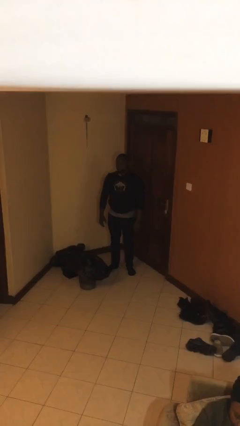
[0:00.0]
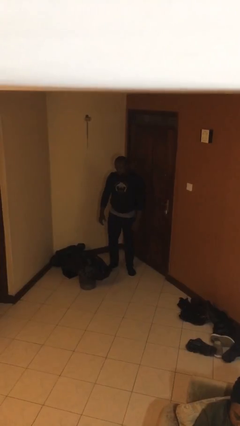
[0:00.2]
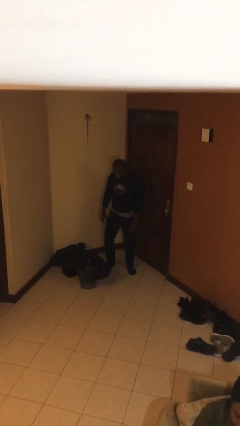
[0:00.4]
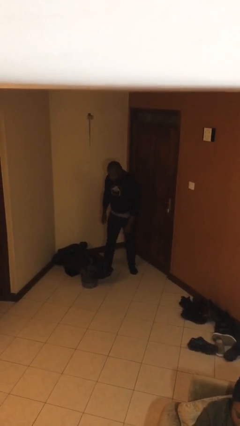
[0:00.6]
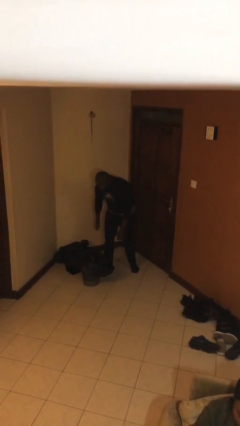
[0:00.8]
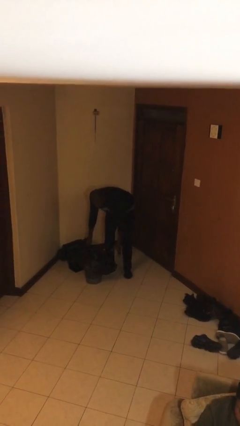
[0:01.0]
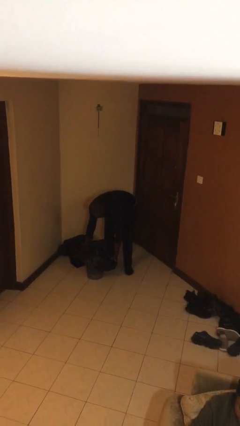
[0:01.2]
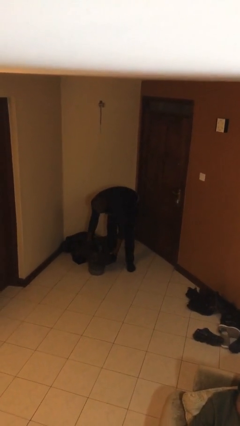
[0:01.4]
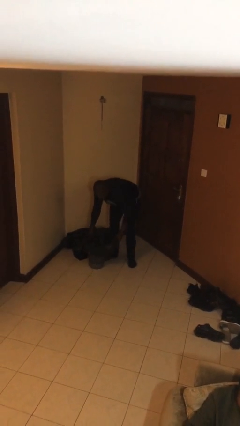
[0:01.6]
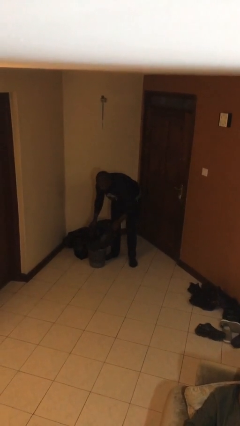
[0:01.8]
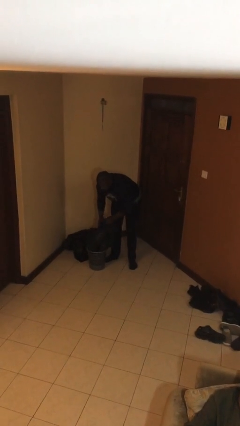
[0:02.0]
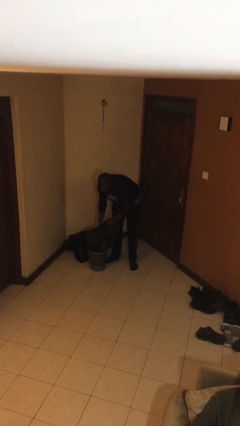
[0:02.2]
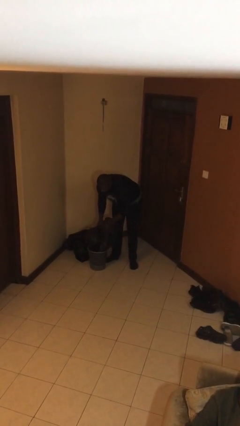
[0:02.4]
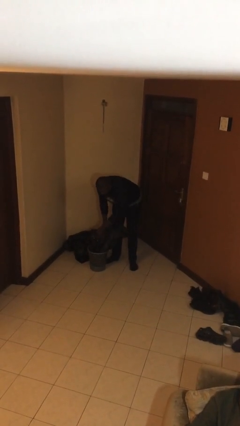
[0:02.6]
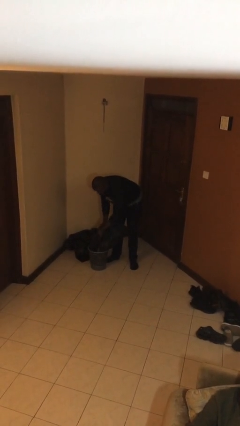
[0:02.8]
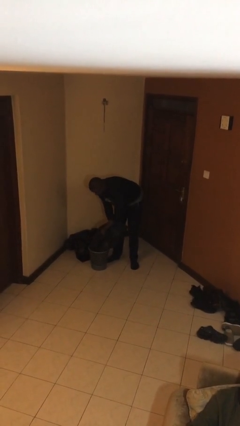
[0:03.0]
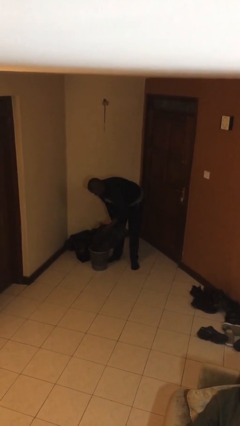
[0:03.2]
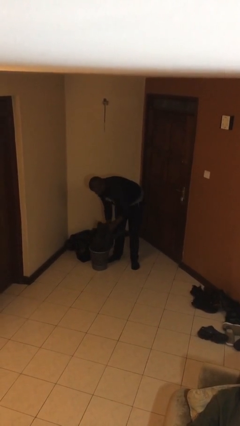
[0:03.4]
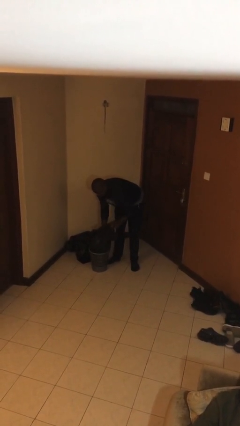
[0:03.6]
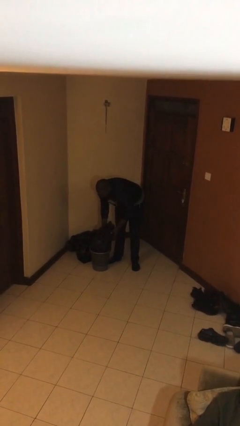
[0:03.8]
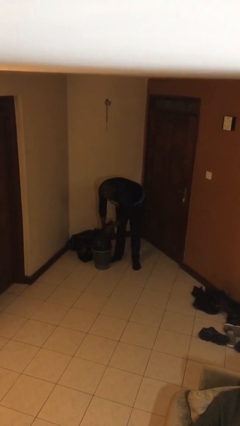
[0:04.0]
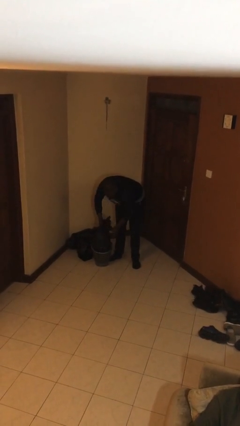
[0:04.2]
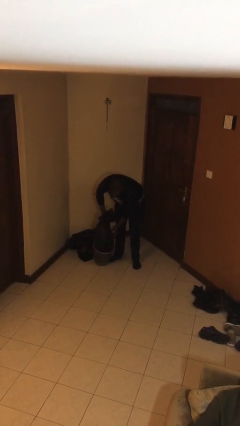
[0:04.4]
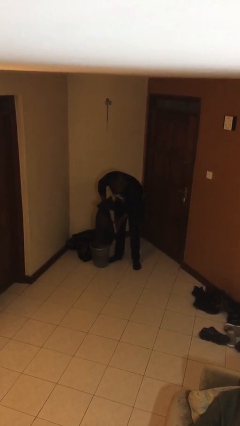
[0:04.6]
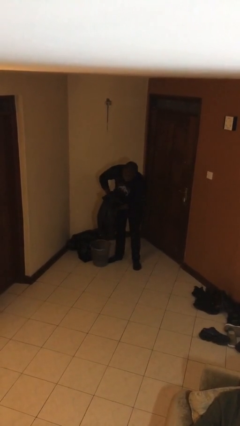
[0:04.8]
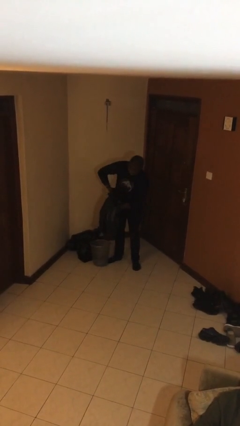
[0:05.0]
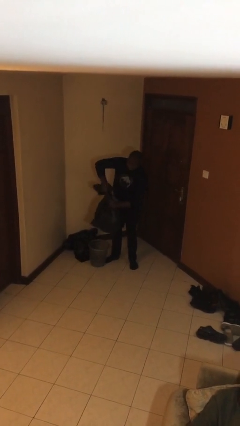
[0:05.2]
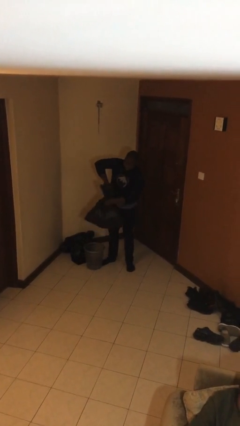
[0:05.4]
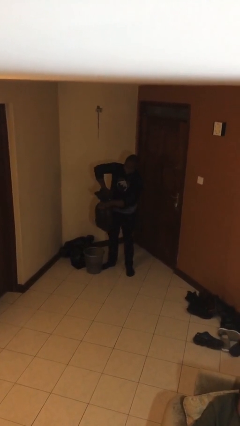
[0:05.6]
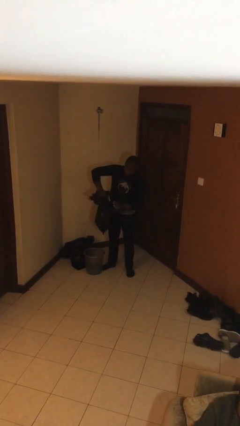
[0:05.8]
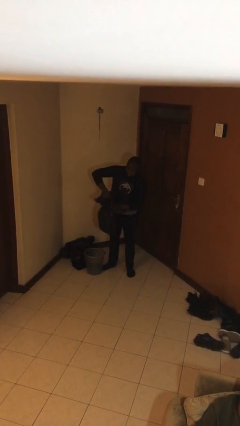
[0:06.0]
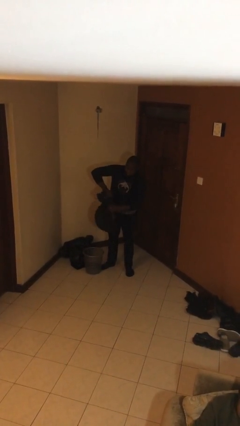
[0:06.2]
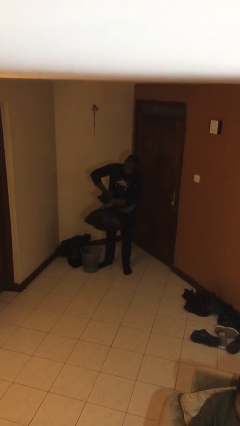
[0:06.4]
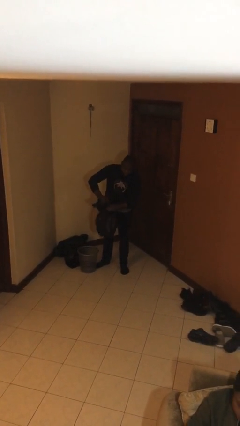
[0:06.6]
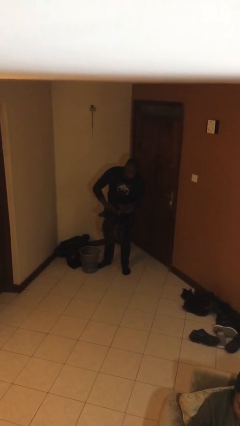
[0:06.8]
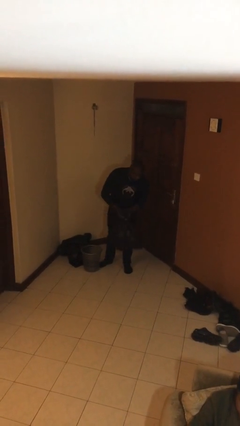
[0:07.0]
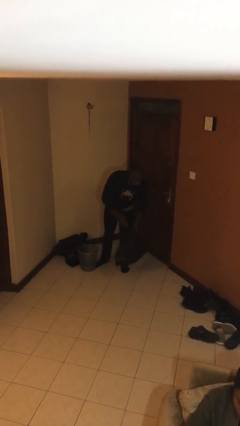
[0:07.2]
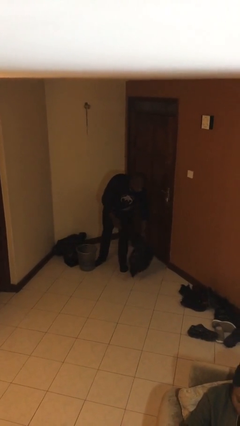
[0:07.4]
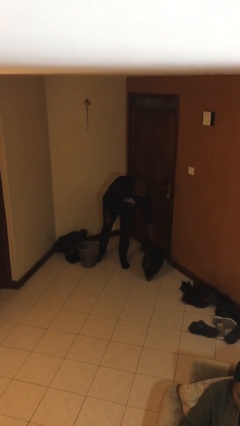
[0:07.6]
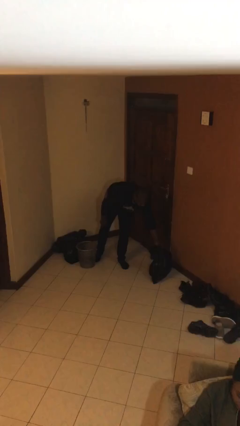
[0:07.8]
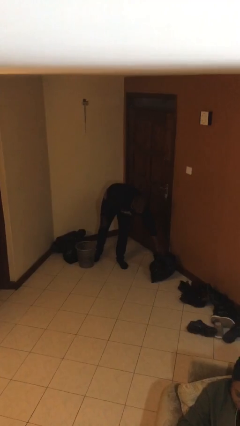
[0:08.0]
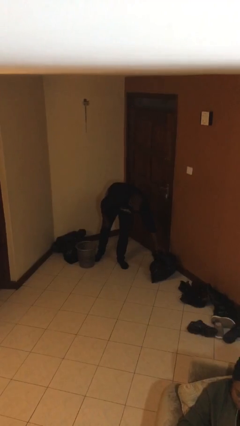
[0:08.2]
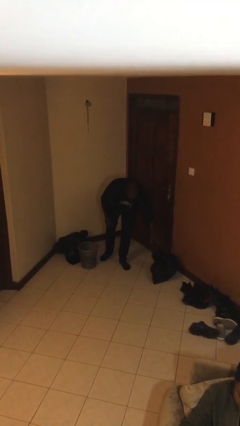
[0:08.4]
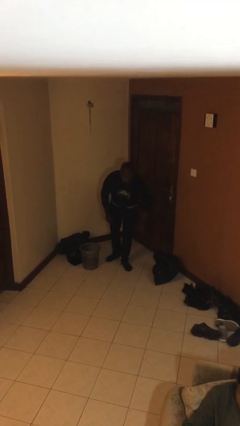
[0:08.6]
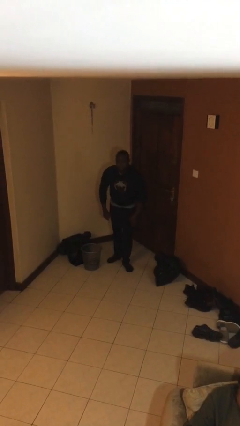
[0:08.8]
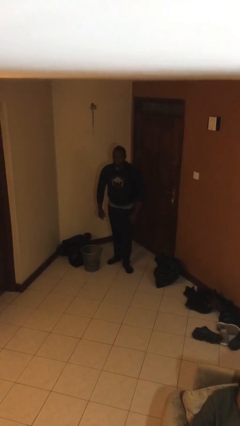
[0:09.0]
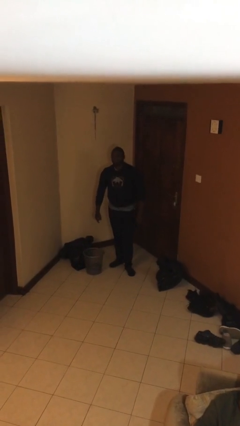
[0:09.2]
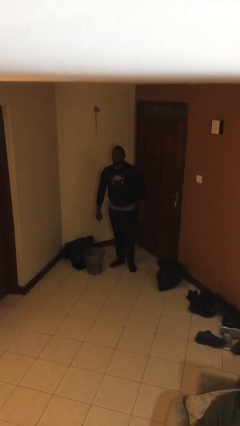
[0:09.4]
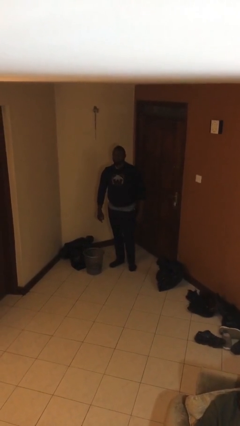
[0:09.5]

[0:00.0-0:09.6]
person removes trashbag from trashcan

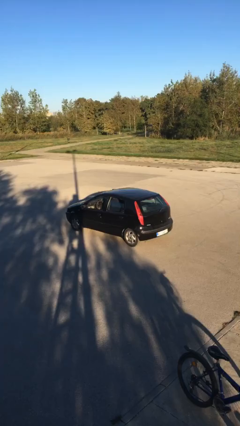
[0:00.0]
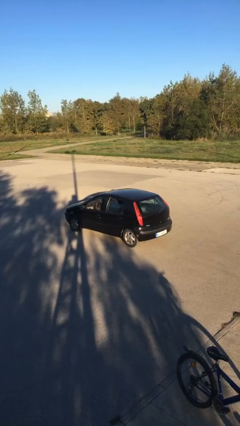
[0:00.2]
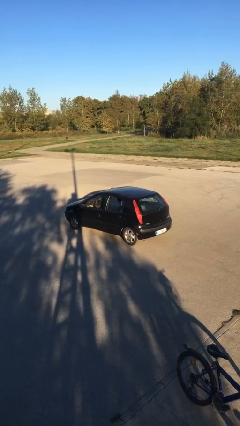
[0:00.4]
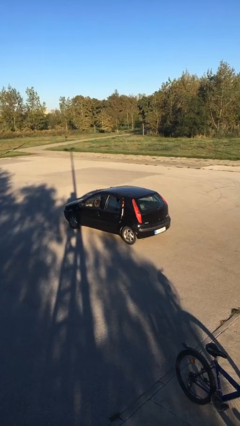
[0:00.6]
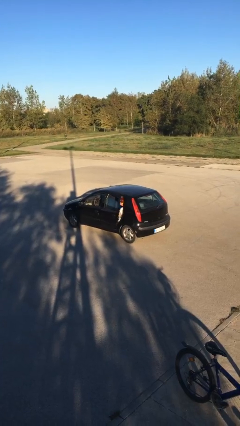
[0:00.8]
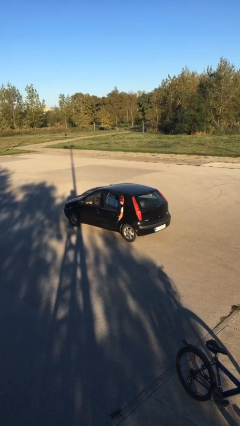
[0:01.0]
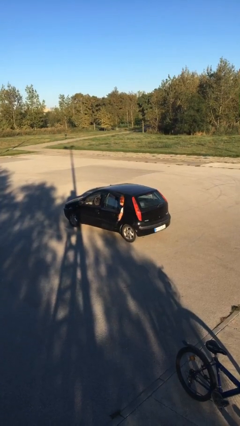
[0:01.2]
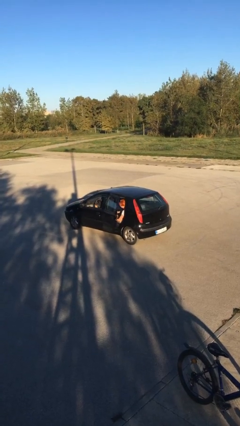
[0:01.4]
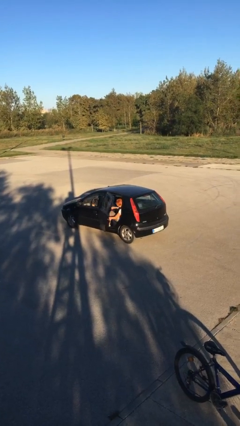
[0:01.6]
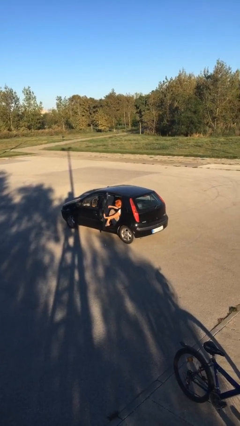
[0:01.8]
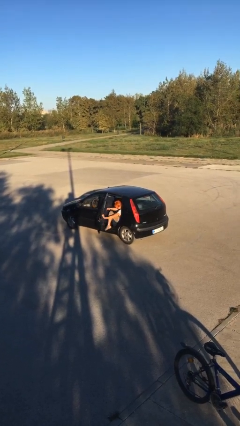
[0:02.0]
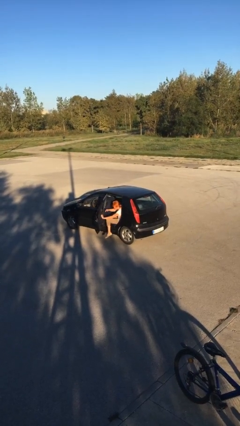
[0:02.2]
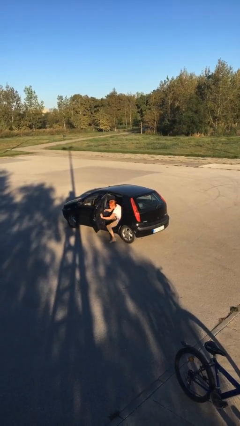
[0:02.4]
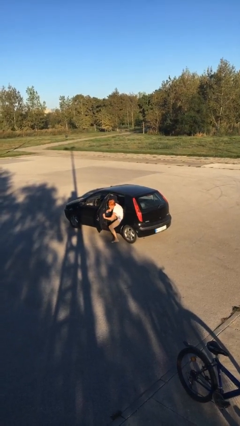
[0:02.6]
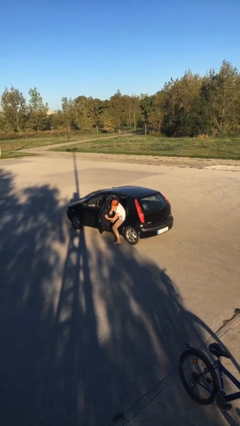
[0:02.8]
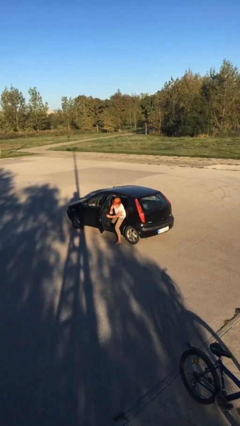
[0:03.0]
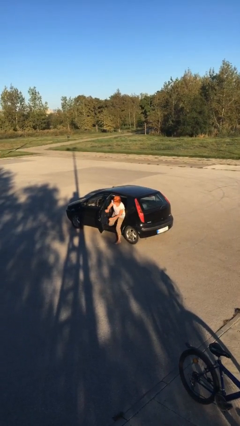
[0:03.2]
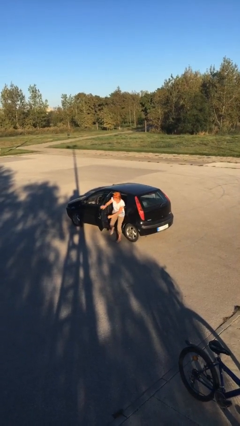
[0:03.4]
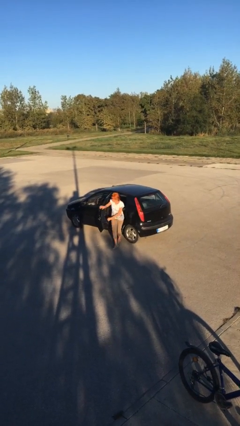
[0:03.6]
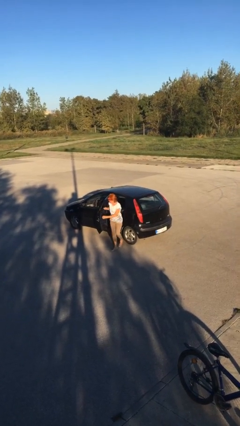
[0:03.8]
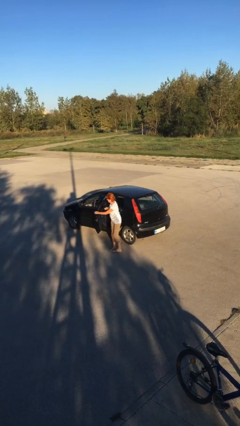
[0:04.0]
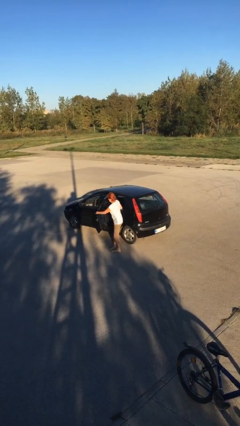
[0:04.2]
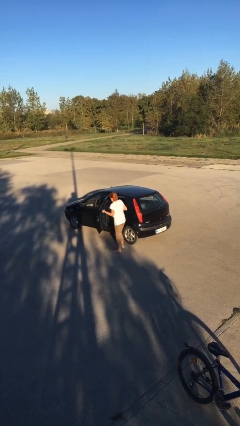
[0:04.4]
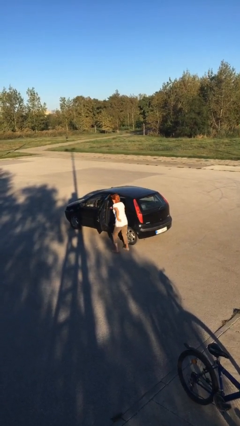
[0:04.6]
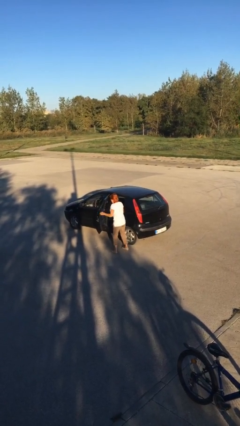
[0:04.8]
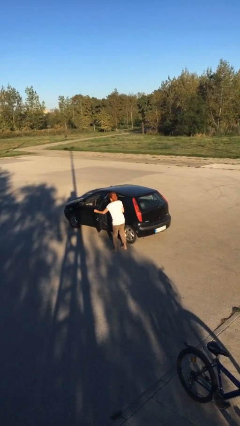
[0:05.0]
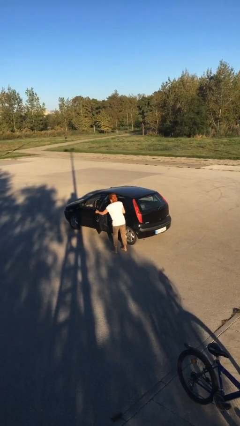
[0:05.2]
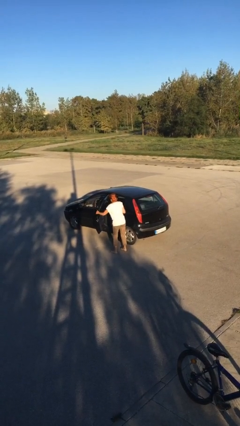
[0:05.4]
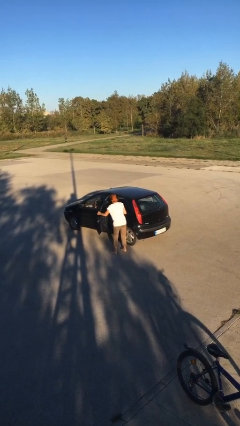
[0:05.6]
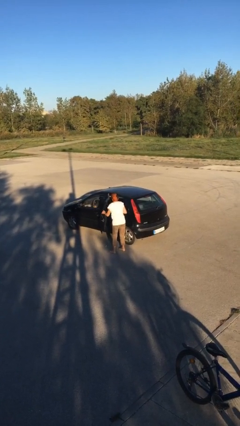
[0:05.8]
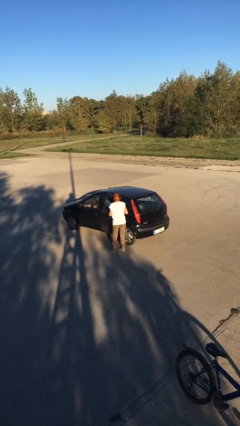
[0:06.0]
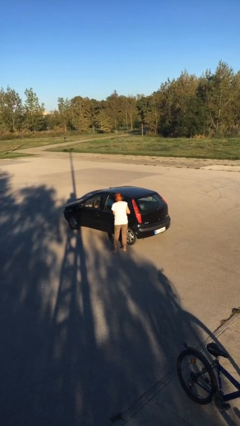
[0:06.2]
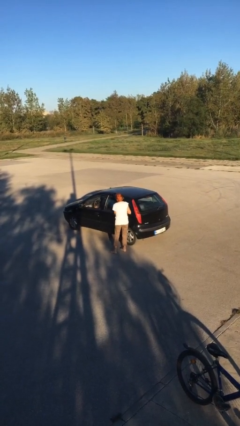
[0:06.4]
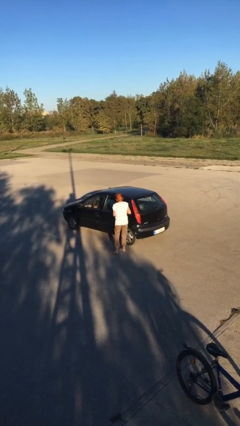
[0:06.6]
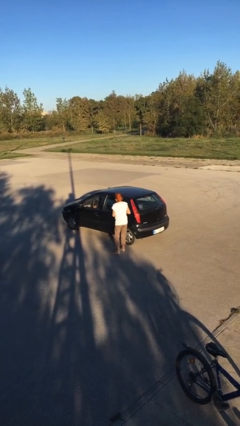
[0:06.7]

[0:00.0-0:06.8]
car drops off person

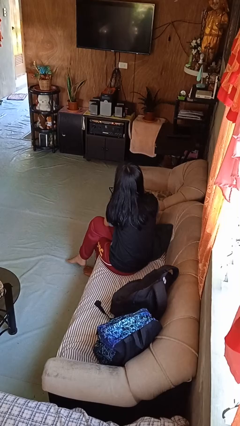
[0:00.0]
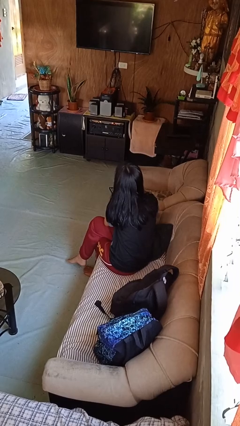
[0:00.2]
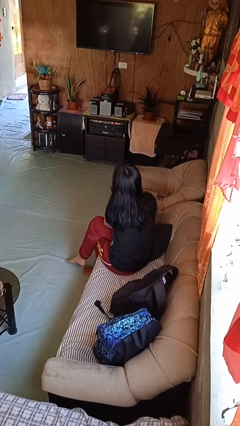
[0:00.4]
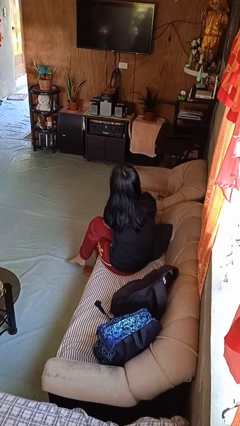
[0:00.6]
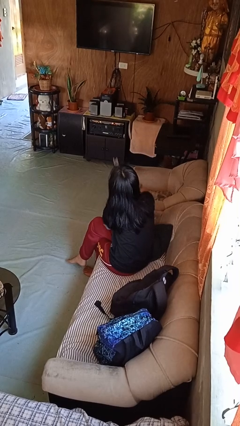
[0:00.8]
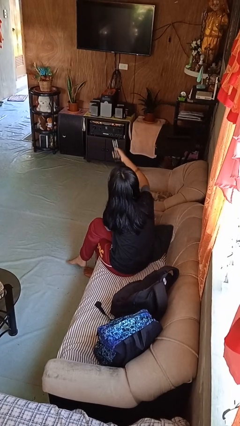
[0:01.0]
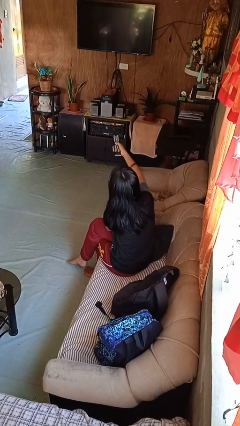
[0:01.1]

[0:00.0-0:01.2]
person uses television remote

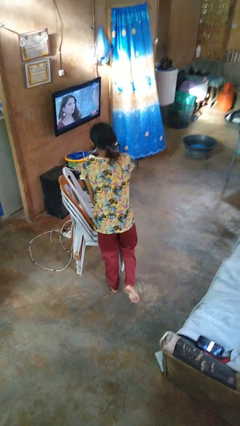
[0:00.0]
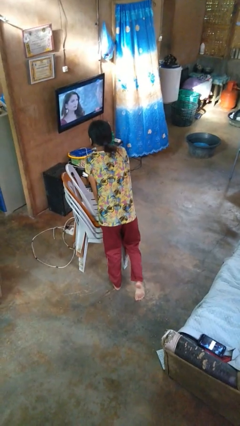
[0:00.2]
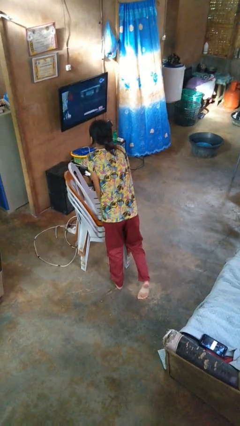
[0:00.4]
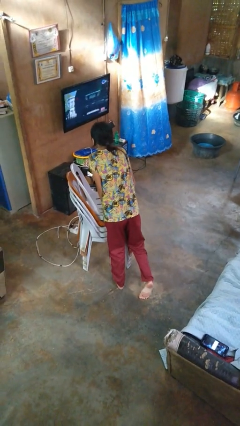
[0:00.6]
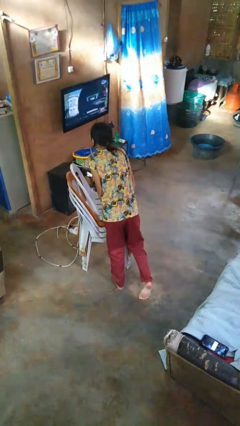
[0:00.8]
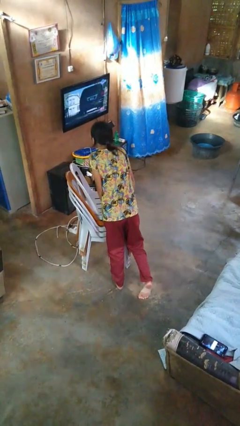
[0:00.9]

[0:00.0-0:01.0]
person trips on object on floor
